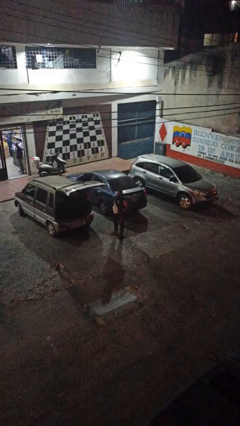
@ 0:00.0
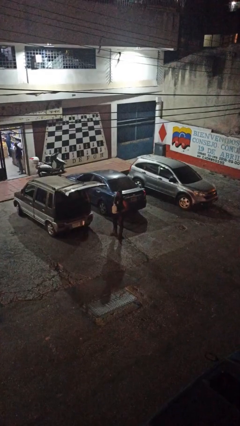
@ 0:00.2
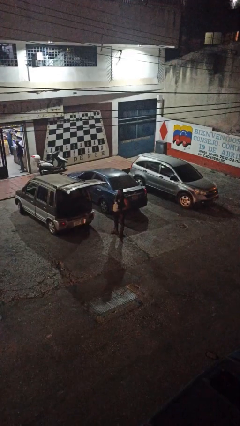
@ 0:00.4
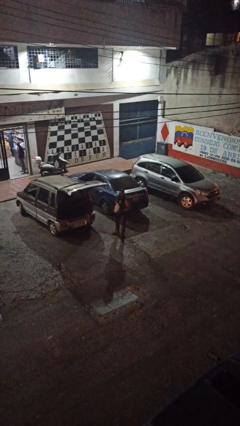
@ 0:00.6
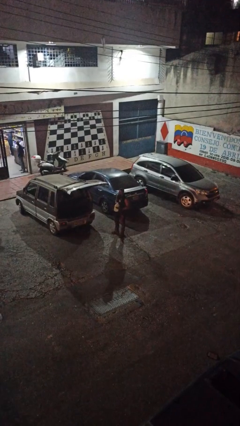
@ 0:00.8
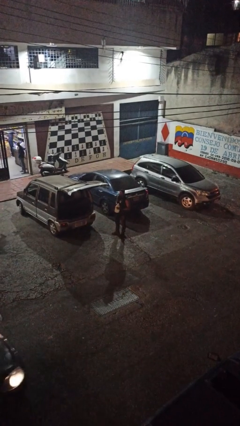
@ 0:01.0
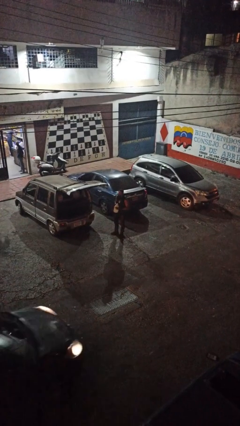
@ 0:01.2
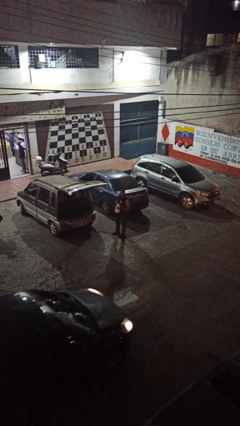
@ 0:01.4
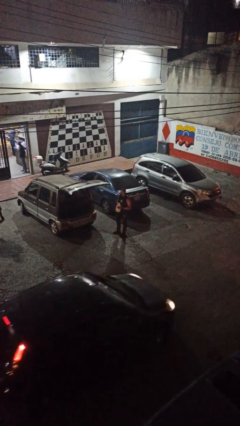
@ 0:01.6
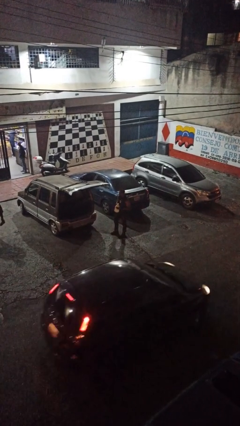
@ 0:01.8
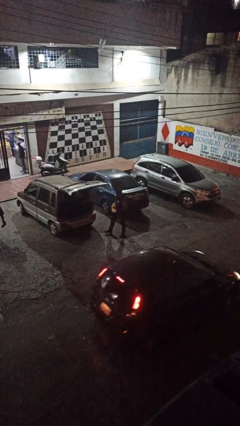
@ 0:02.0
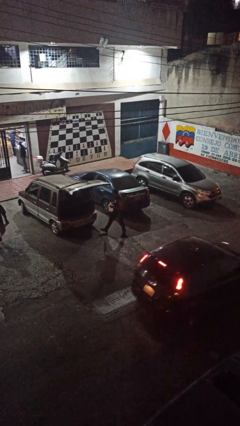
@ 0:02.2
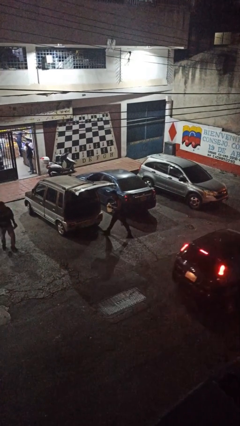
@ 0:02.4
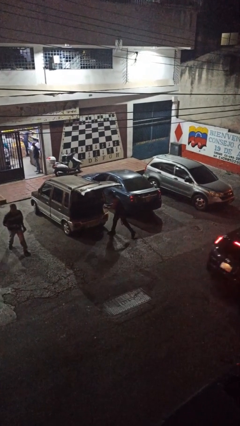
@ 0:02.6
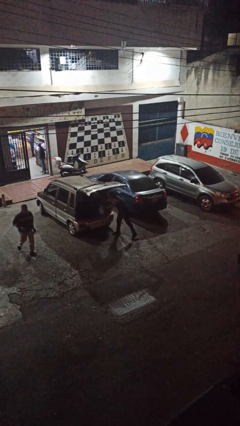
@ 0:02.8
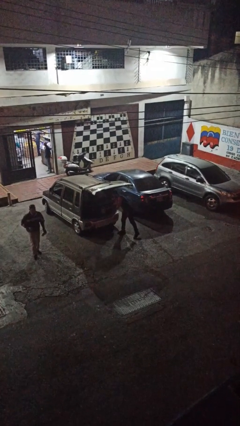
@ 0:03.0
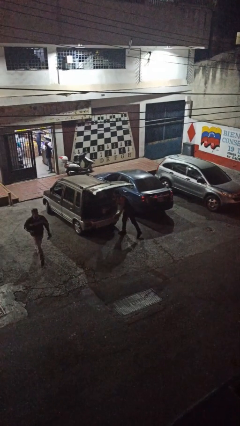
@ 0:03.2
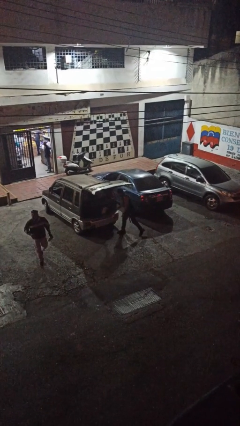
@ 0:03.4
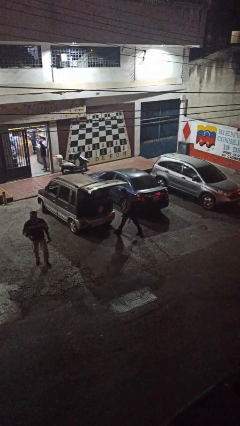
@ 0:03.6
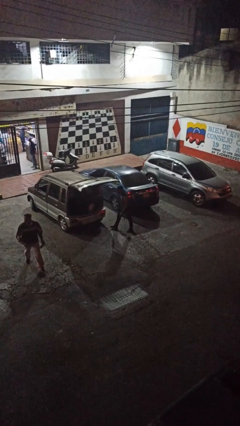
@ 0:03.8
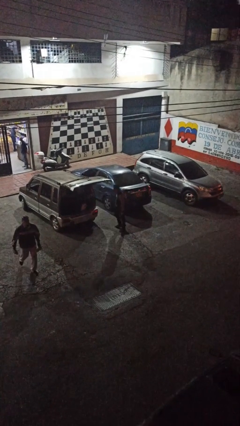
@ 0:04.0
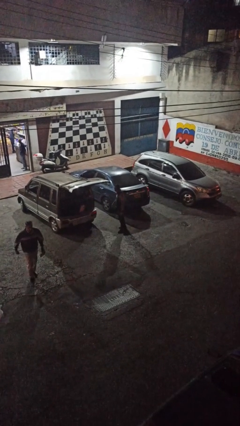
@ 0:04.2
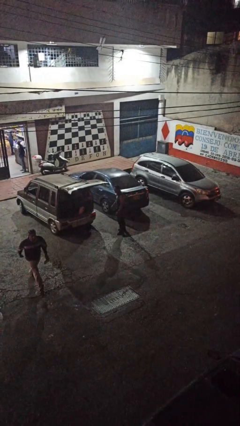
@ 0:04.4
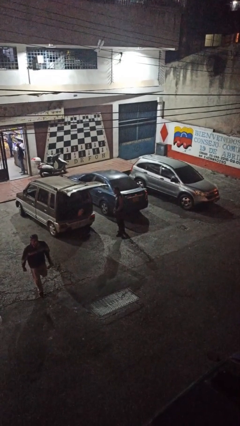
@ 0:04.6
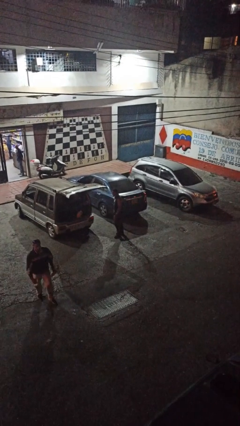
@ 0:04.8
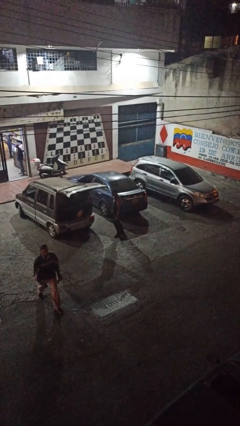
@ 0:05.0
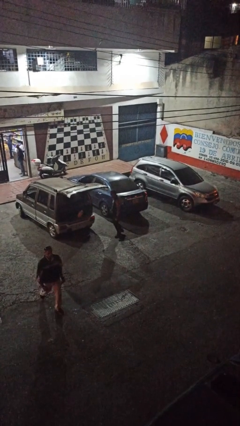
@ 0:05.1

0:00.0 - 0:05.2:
person loads car

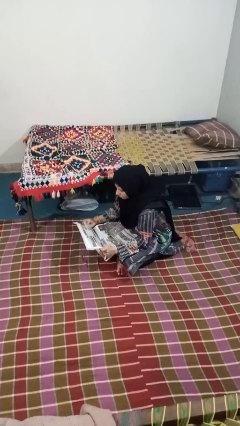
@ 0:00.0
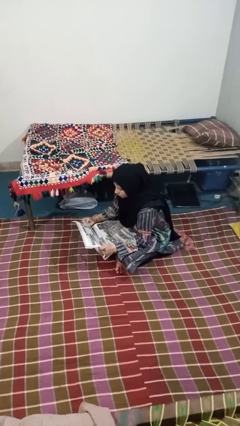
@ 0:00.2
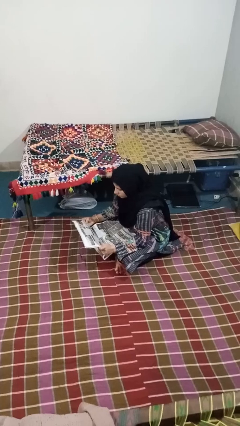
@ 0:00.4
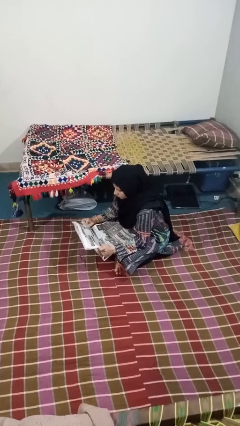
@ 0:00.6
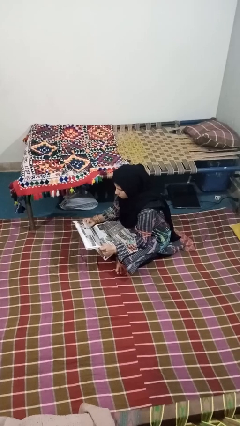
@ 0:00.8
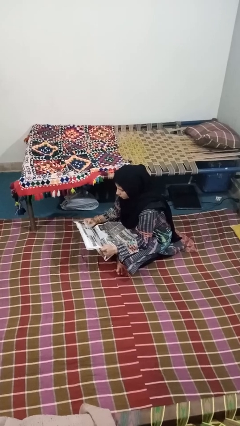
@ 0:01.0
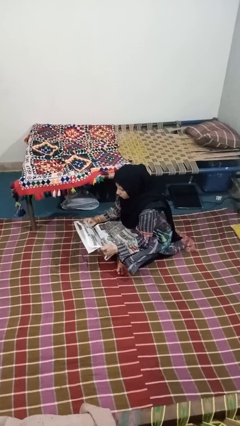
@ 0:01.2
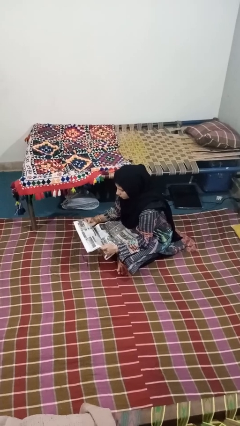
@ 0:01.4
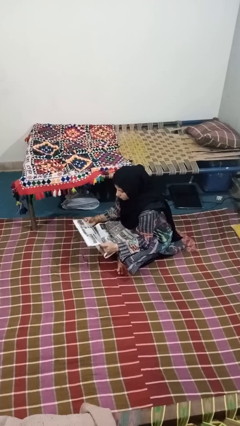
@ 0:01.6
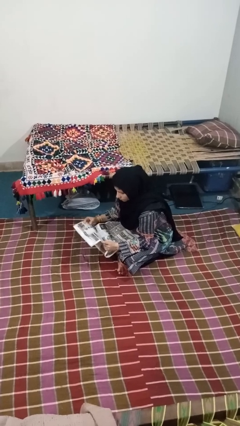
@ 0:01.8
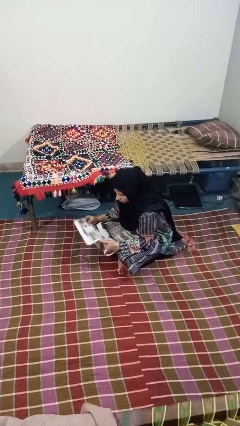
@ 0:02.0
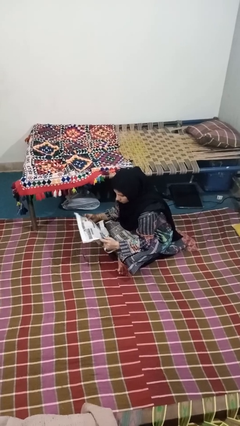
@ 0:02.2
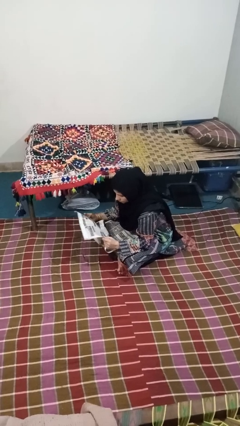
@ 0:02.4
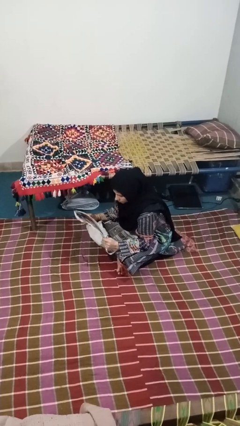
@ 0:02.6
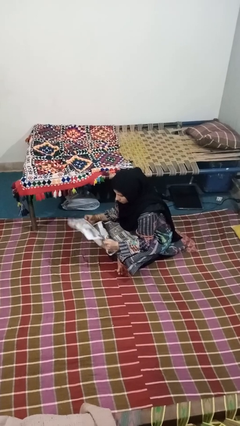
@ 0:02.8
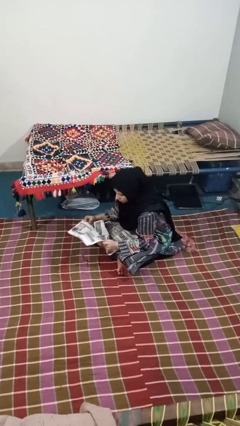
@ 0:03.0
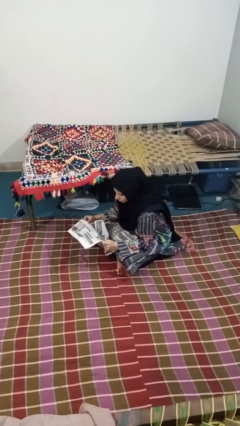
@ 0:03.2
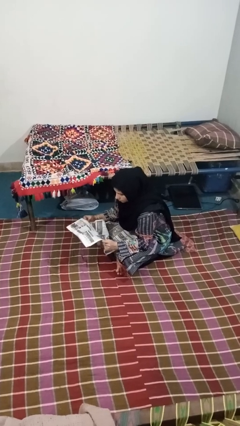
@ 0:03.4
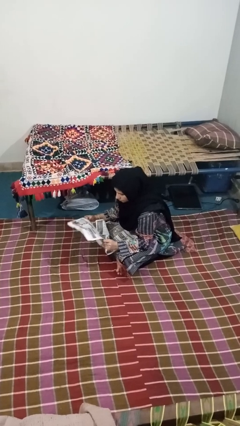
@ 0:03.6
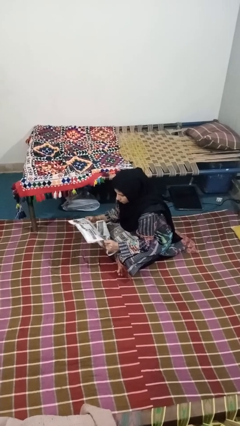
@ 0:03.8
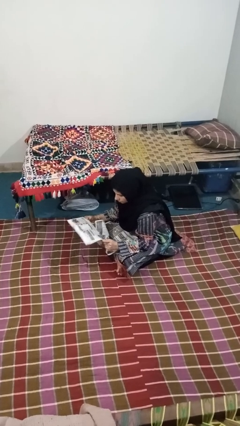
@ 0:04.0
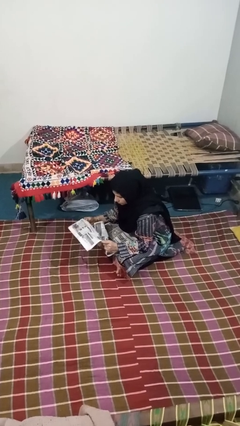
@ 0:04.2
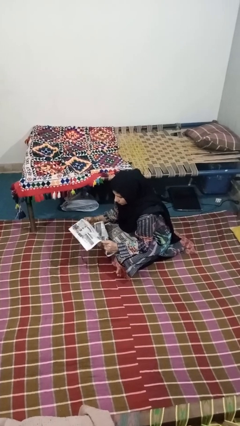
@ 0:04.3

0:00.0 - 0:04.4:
person reads newspaper

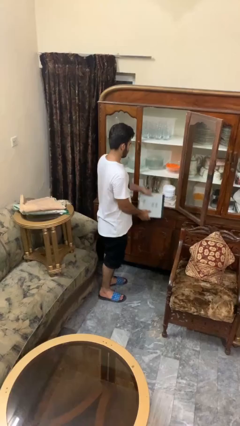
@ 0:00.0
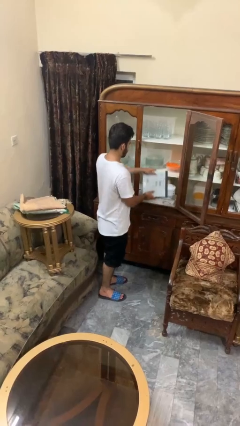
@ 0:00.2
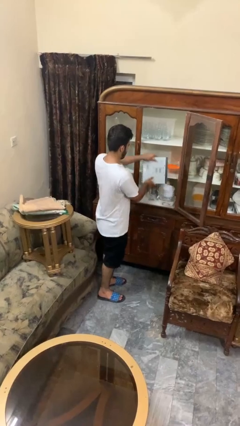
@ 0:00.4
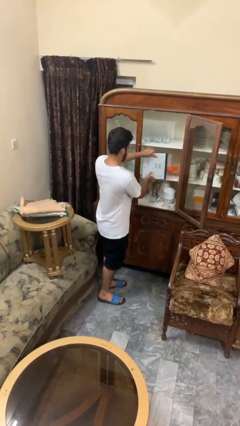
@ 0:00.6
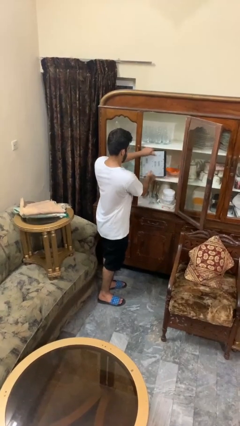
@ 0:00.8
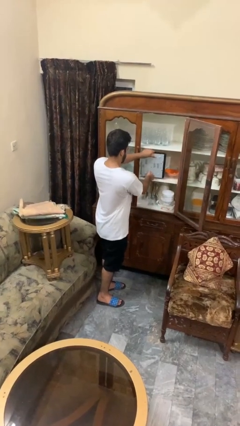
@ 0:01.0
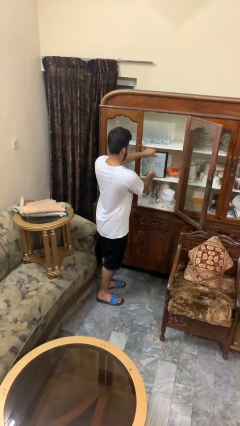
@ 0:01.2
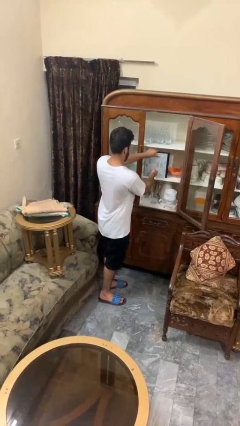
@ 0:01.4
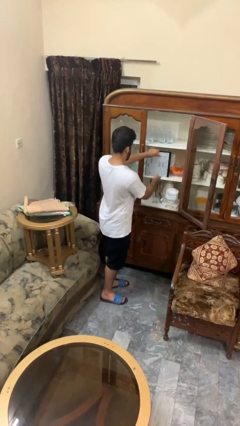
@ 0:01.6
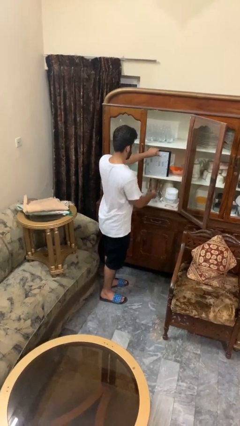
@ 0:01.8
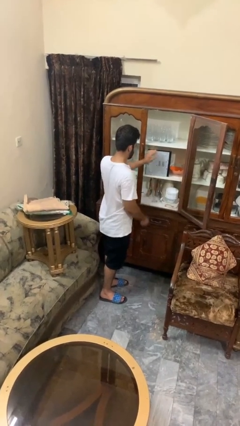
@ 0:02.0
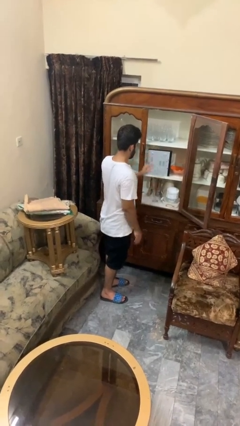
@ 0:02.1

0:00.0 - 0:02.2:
person puts down object into cabinet

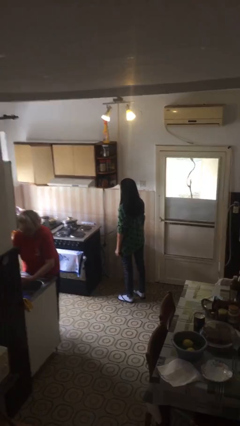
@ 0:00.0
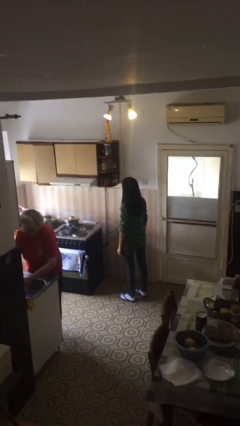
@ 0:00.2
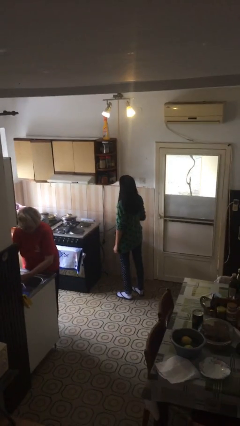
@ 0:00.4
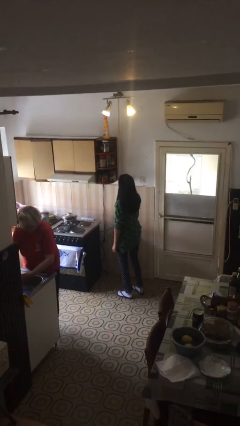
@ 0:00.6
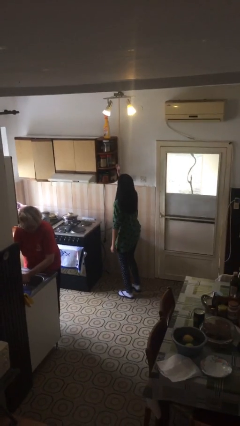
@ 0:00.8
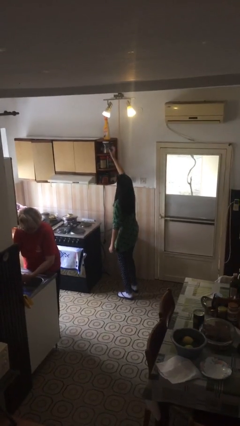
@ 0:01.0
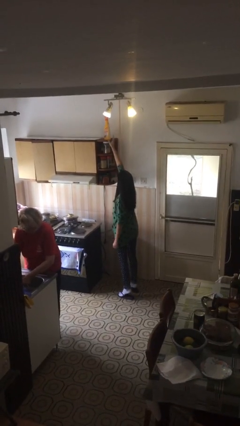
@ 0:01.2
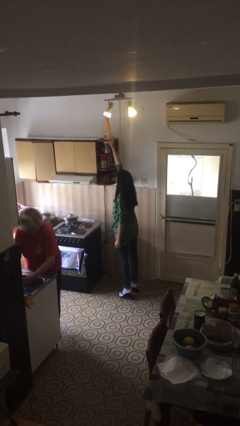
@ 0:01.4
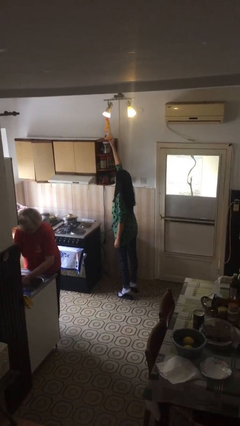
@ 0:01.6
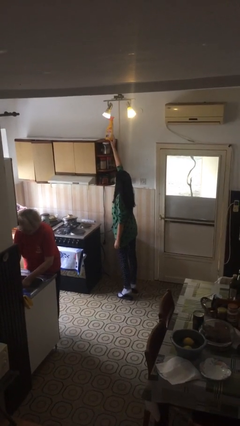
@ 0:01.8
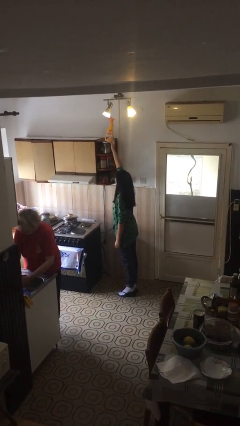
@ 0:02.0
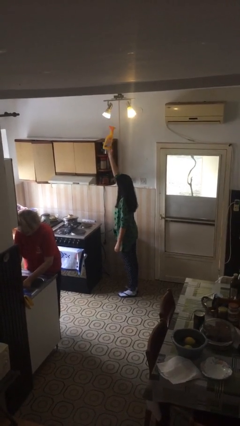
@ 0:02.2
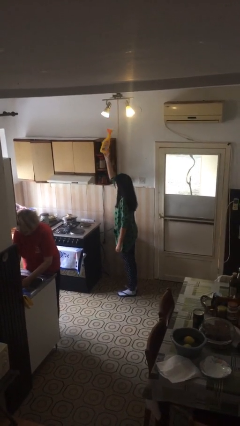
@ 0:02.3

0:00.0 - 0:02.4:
person picks up object from shelf

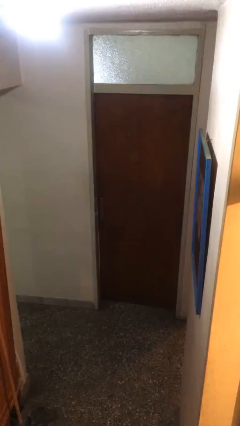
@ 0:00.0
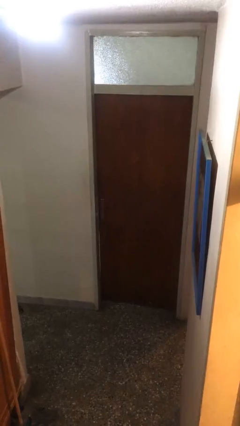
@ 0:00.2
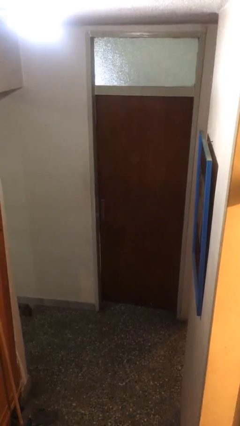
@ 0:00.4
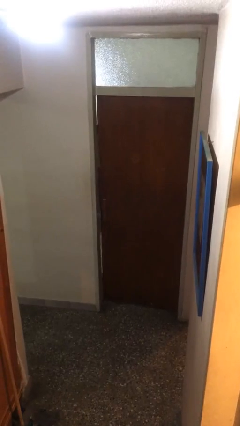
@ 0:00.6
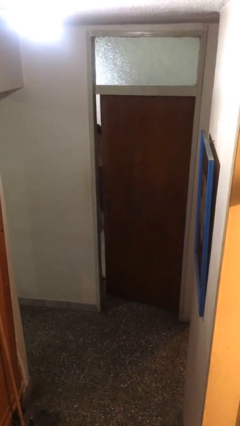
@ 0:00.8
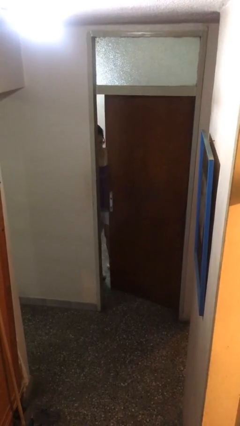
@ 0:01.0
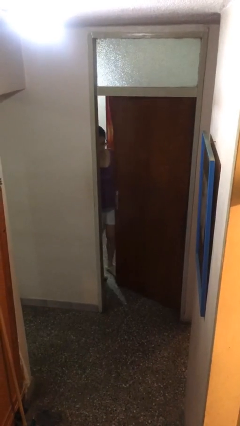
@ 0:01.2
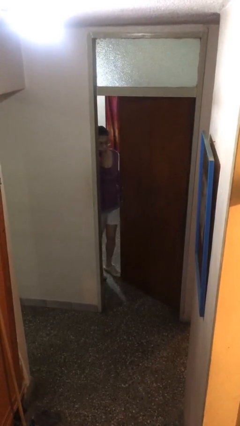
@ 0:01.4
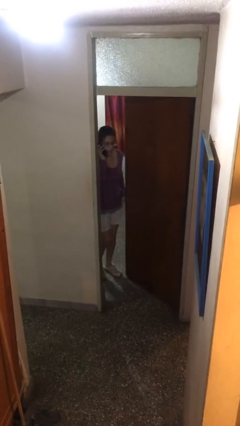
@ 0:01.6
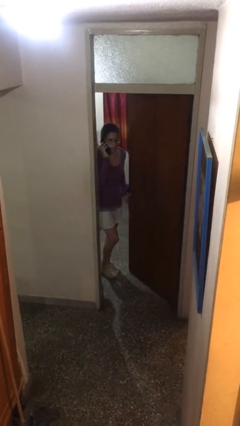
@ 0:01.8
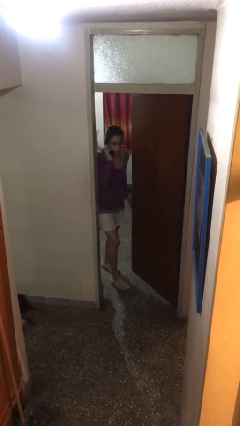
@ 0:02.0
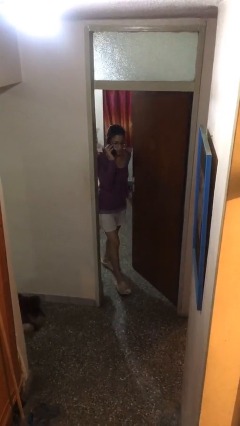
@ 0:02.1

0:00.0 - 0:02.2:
person opens facility door

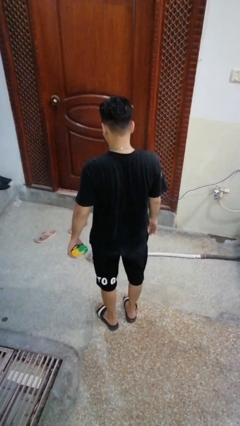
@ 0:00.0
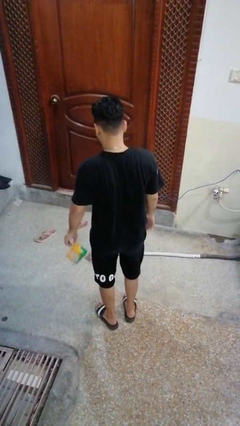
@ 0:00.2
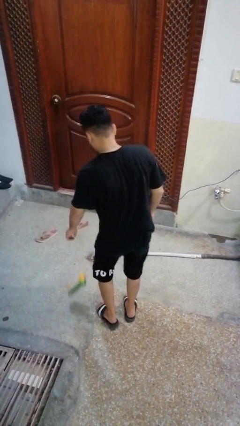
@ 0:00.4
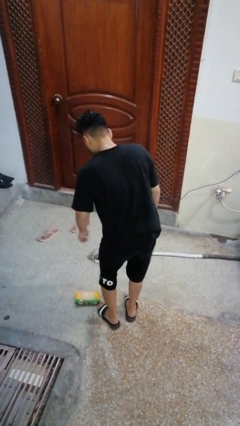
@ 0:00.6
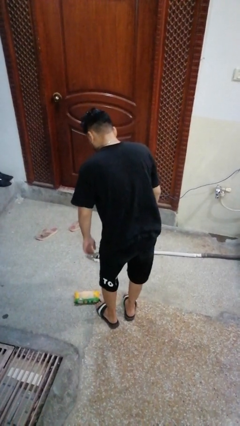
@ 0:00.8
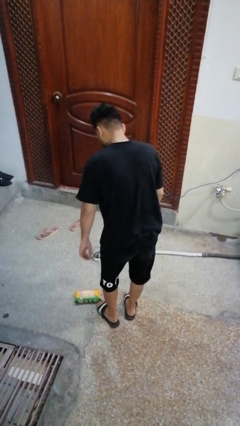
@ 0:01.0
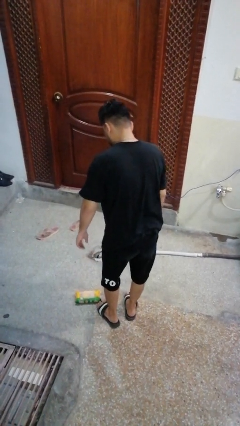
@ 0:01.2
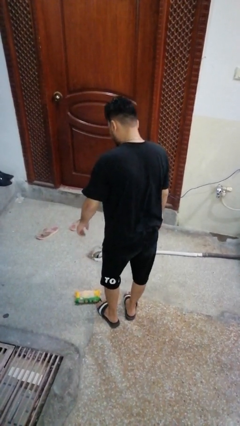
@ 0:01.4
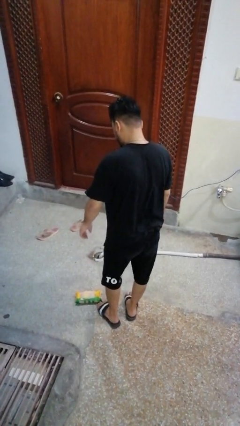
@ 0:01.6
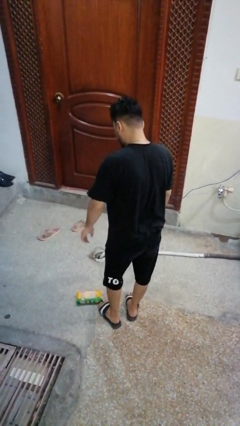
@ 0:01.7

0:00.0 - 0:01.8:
person drops object
